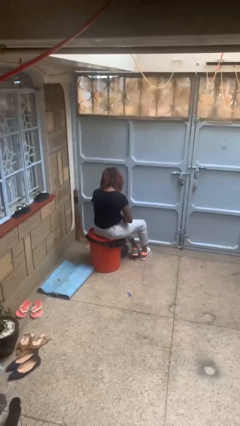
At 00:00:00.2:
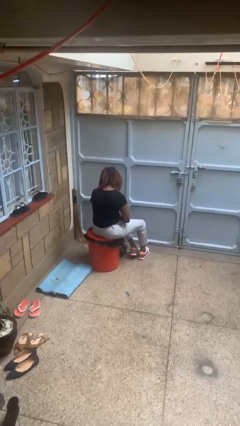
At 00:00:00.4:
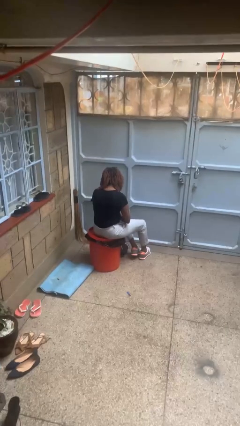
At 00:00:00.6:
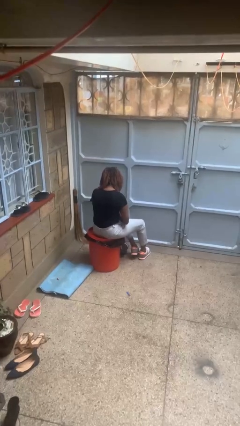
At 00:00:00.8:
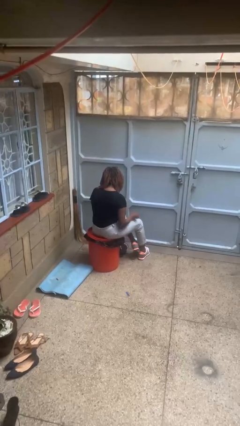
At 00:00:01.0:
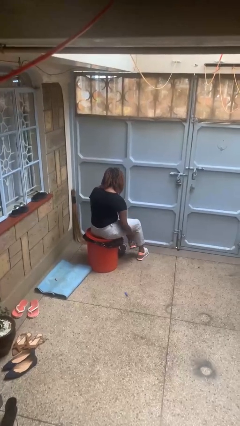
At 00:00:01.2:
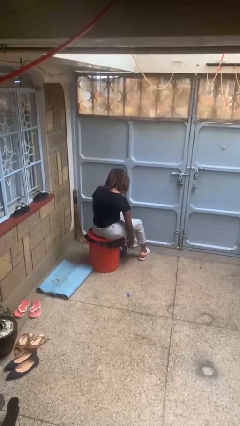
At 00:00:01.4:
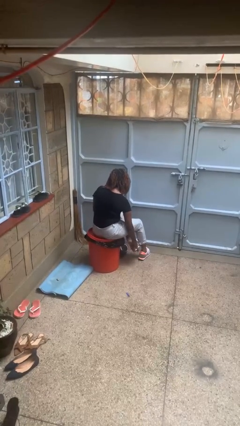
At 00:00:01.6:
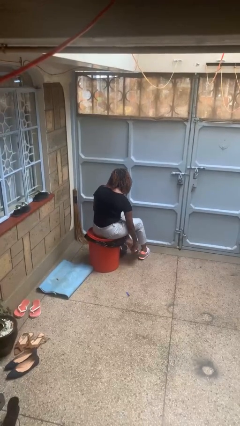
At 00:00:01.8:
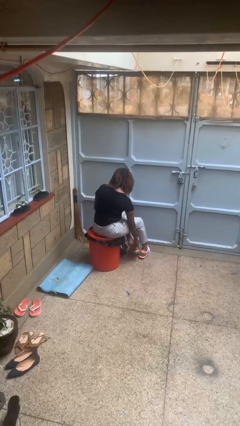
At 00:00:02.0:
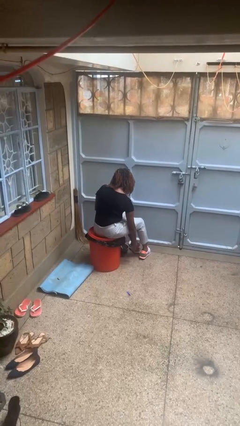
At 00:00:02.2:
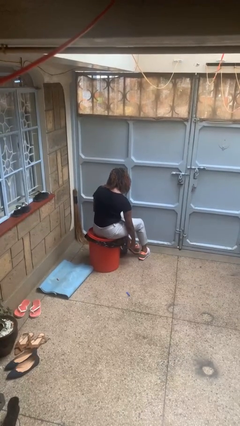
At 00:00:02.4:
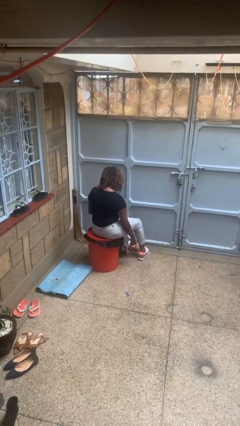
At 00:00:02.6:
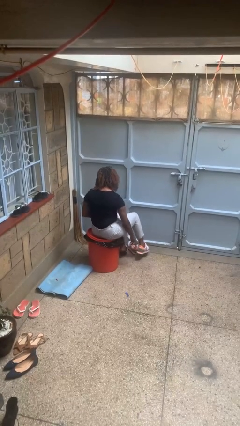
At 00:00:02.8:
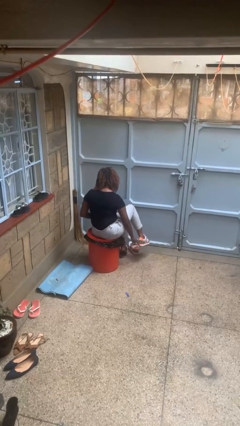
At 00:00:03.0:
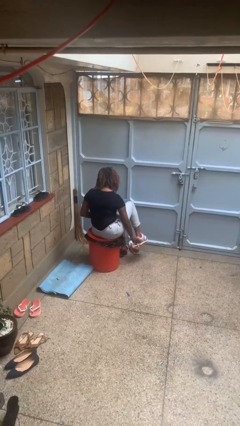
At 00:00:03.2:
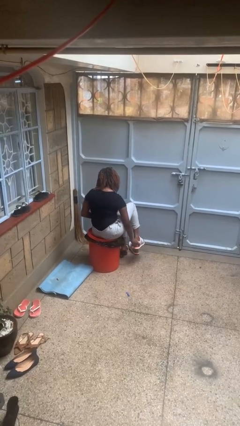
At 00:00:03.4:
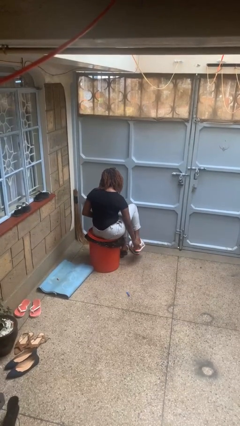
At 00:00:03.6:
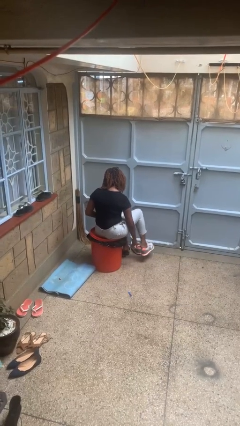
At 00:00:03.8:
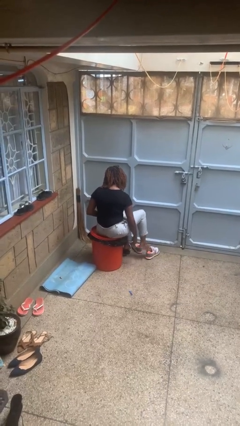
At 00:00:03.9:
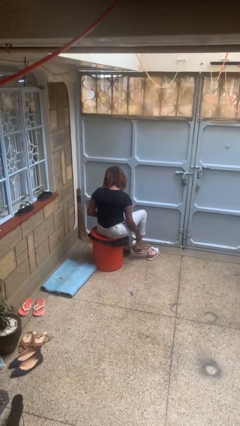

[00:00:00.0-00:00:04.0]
person takes off shoes

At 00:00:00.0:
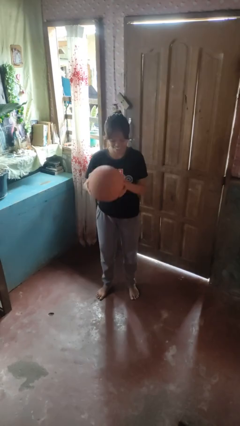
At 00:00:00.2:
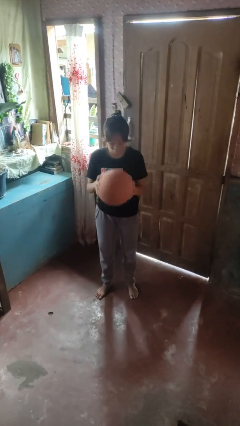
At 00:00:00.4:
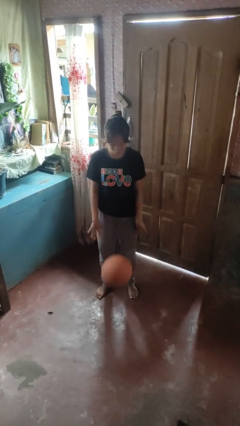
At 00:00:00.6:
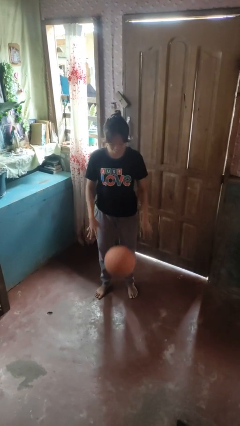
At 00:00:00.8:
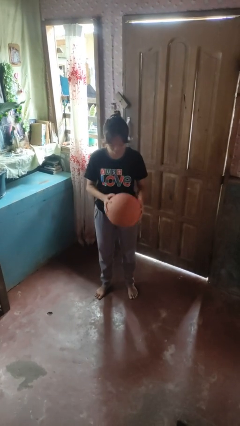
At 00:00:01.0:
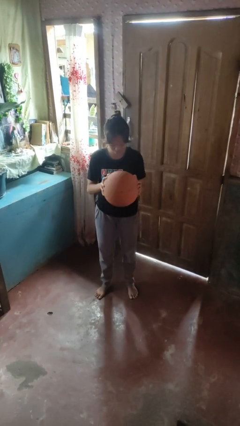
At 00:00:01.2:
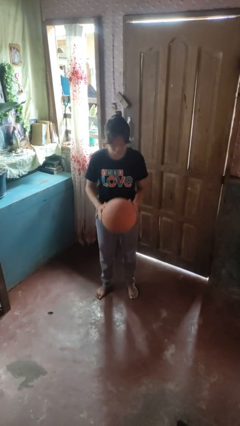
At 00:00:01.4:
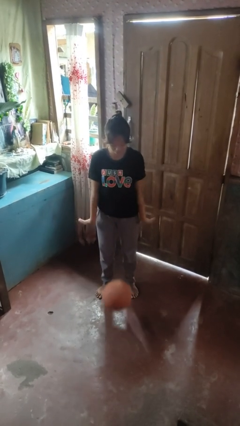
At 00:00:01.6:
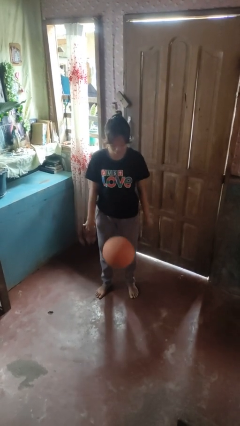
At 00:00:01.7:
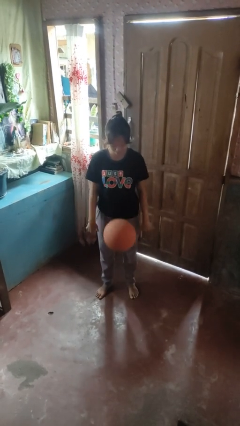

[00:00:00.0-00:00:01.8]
person bounces ball on floor

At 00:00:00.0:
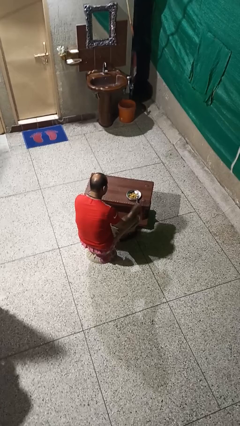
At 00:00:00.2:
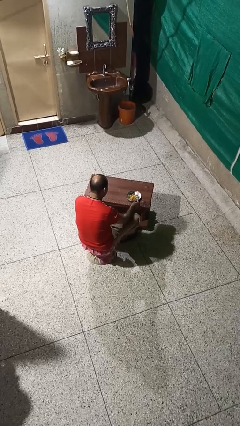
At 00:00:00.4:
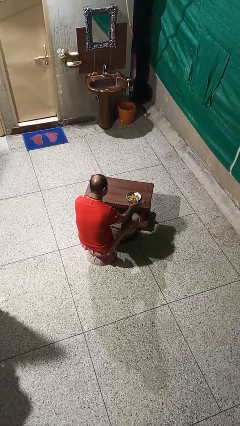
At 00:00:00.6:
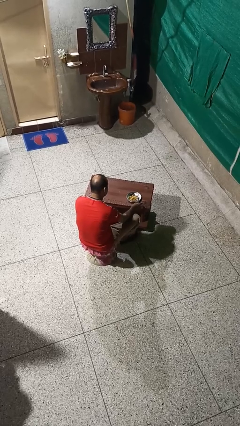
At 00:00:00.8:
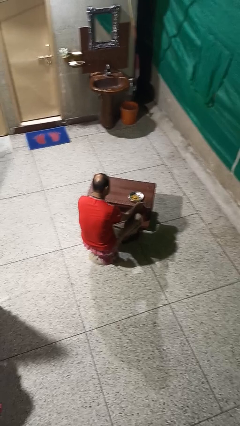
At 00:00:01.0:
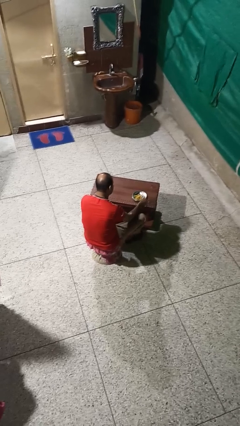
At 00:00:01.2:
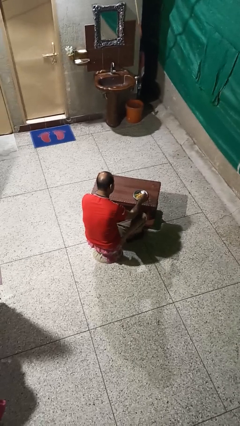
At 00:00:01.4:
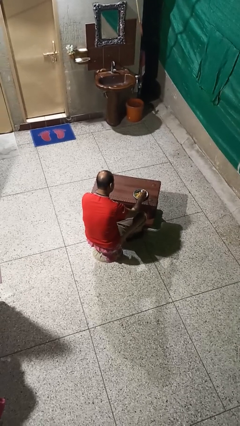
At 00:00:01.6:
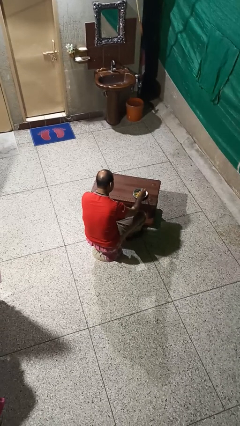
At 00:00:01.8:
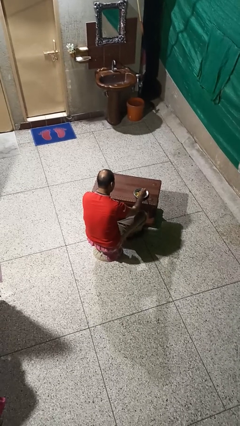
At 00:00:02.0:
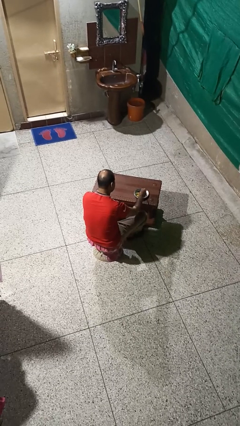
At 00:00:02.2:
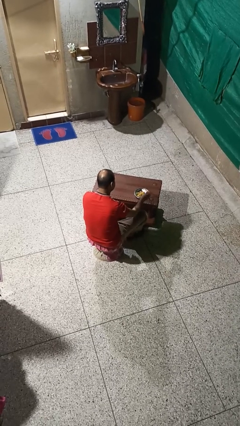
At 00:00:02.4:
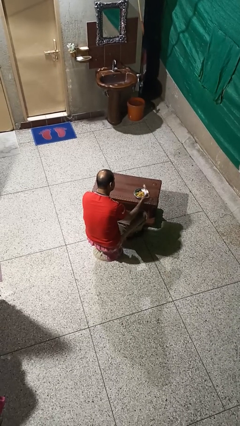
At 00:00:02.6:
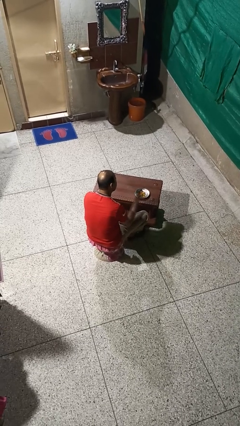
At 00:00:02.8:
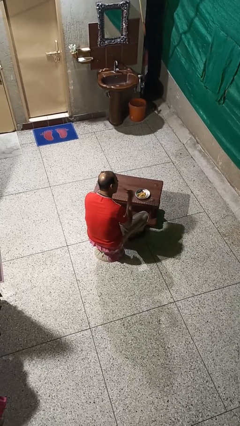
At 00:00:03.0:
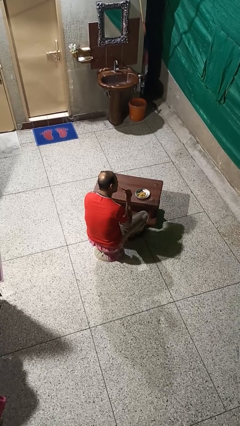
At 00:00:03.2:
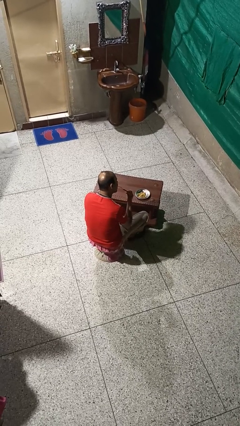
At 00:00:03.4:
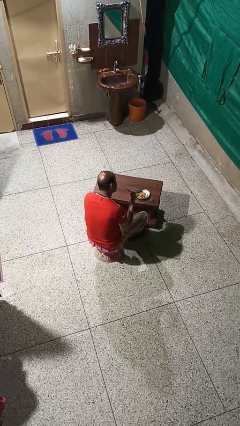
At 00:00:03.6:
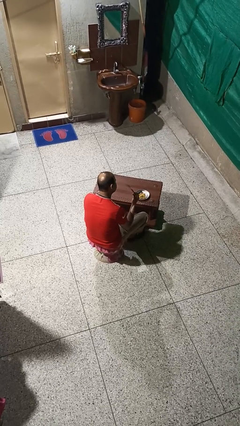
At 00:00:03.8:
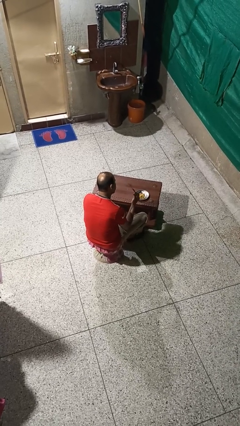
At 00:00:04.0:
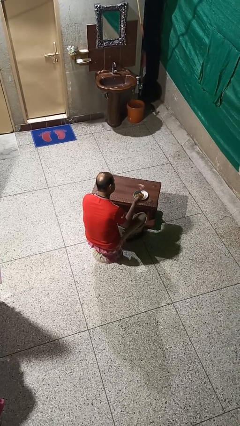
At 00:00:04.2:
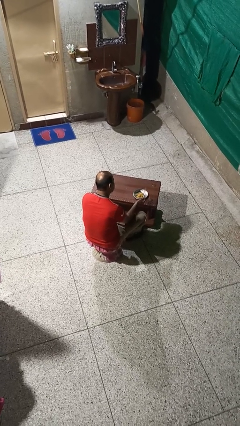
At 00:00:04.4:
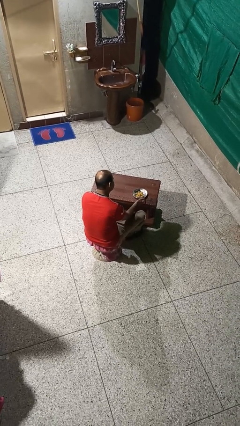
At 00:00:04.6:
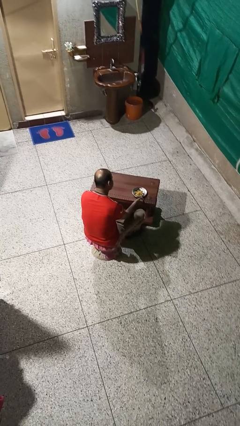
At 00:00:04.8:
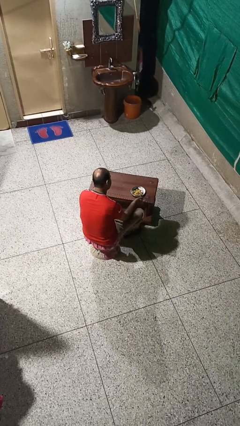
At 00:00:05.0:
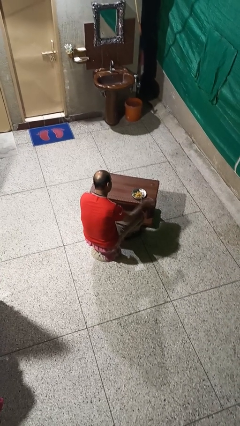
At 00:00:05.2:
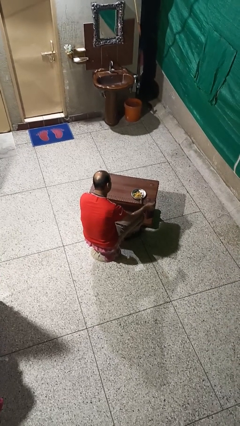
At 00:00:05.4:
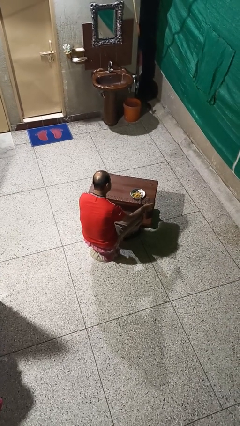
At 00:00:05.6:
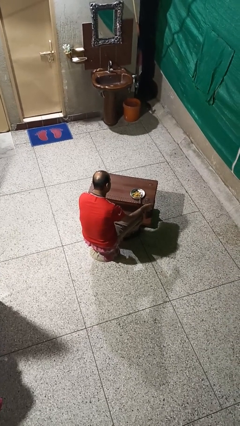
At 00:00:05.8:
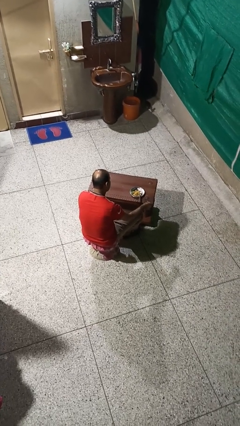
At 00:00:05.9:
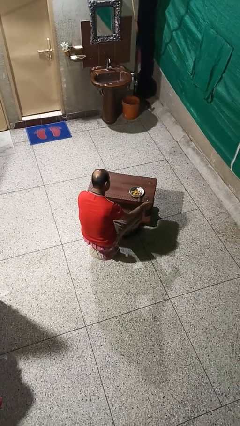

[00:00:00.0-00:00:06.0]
person eats with utensil

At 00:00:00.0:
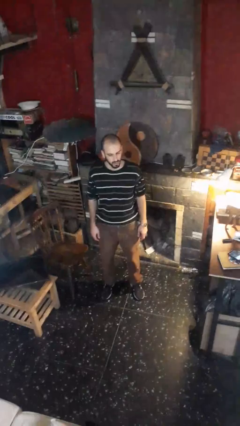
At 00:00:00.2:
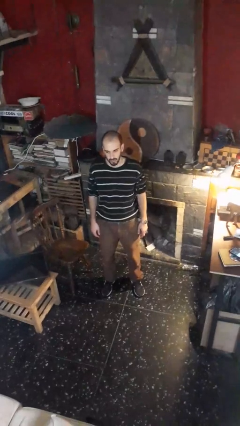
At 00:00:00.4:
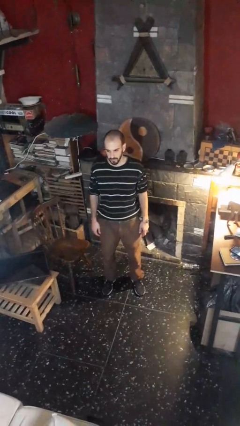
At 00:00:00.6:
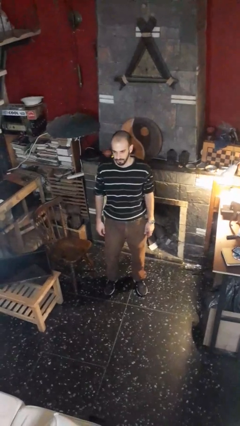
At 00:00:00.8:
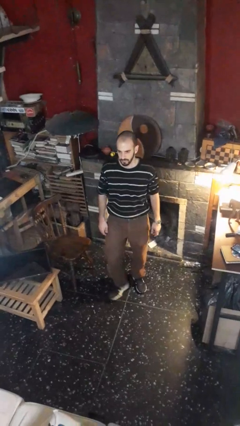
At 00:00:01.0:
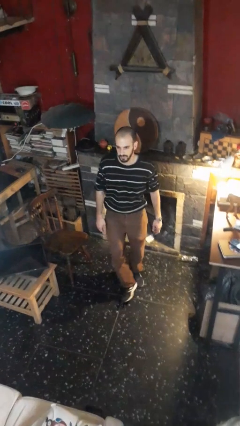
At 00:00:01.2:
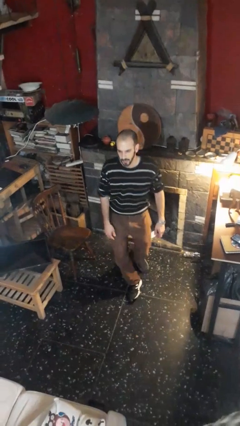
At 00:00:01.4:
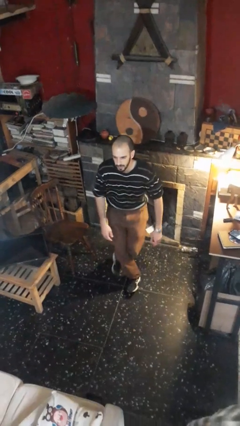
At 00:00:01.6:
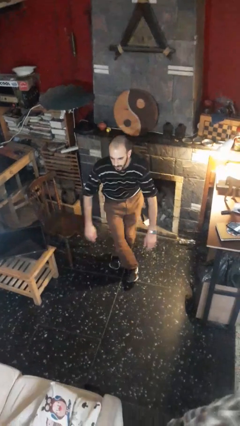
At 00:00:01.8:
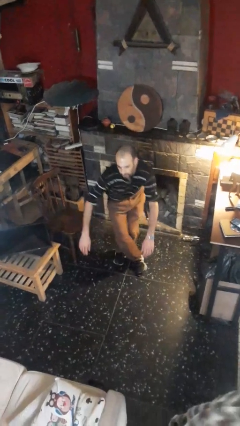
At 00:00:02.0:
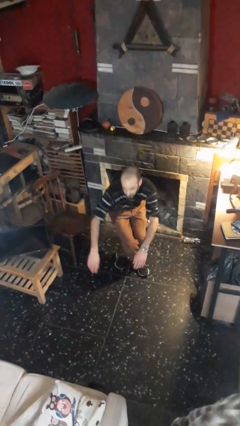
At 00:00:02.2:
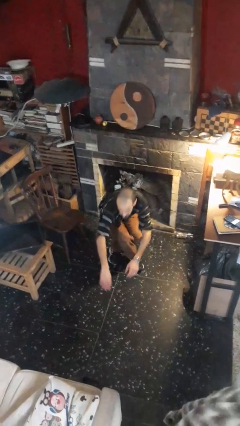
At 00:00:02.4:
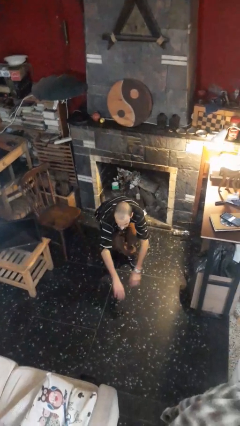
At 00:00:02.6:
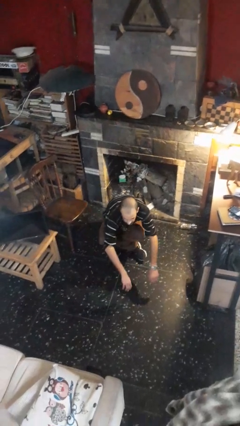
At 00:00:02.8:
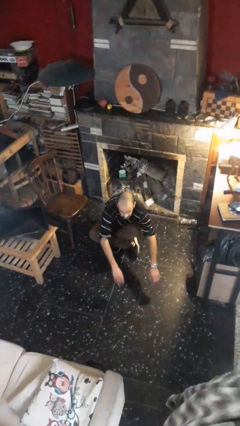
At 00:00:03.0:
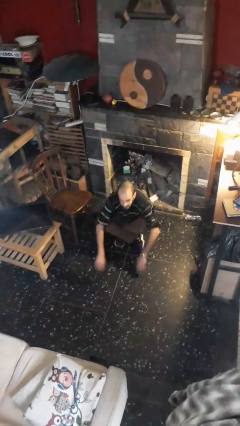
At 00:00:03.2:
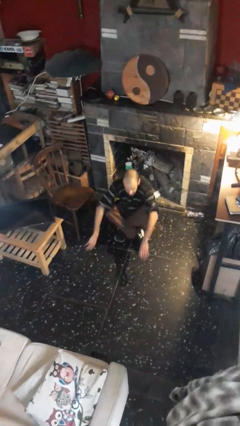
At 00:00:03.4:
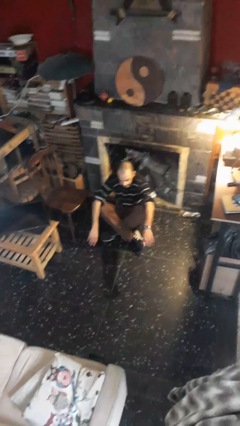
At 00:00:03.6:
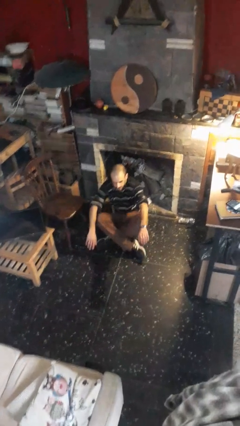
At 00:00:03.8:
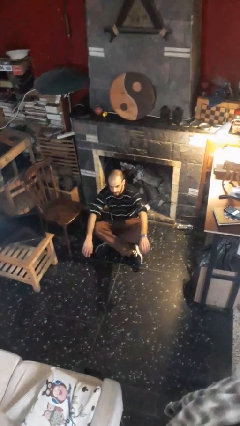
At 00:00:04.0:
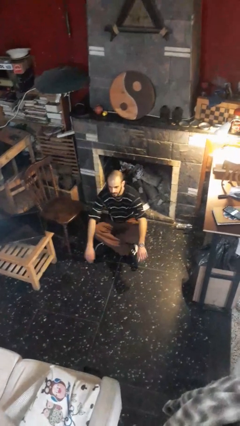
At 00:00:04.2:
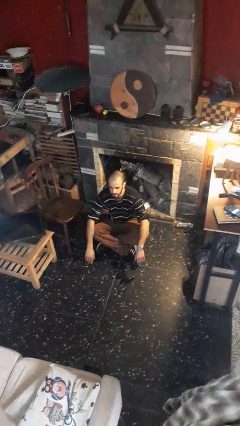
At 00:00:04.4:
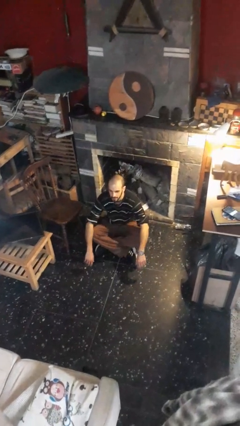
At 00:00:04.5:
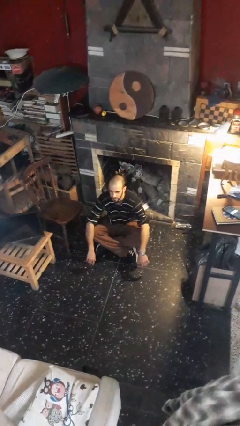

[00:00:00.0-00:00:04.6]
person sits crisscross

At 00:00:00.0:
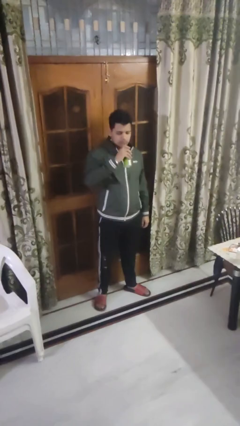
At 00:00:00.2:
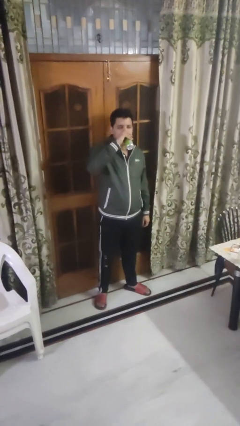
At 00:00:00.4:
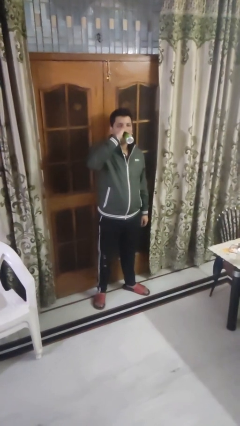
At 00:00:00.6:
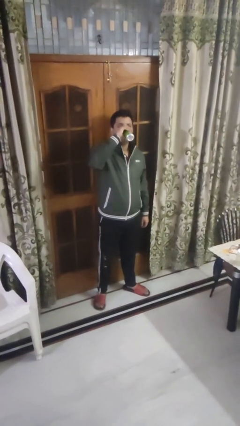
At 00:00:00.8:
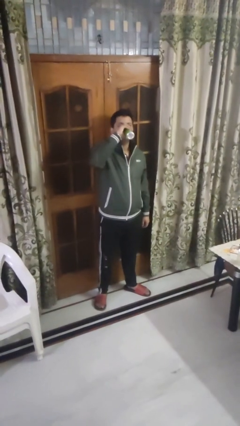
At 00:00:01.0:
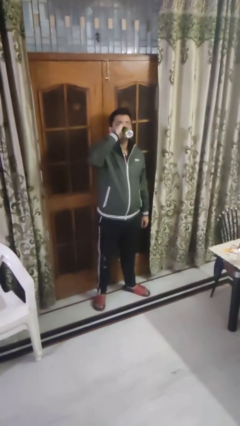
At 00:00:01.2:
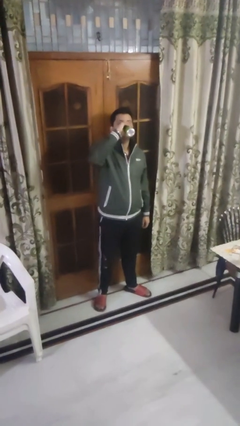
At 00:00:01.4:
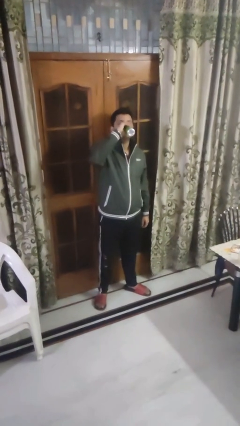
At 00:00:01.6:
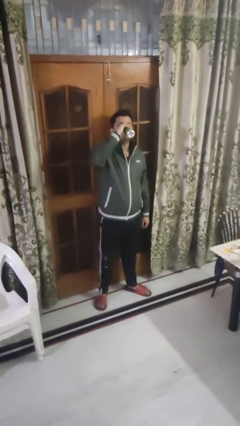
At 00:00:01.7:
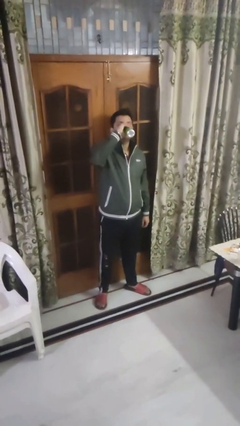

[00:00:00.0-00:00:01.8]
person drinks from beverage can
